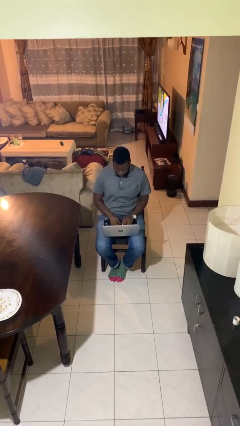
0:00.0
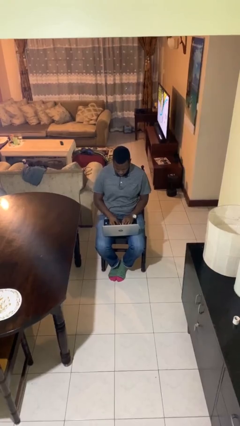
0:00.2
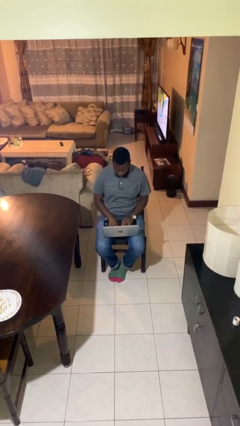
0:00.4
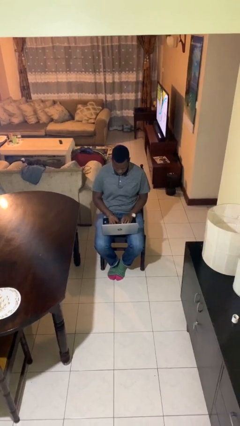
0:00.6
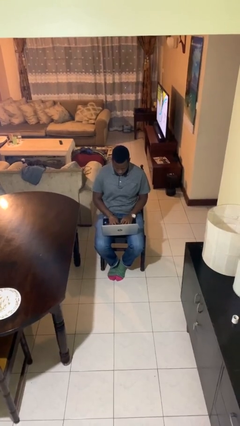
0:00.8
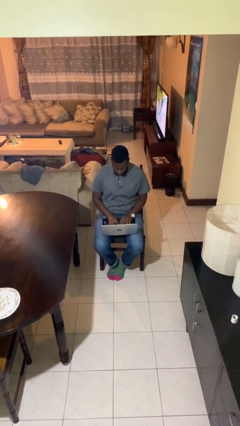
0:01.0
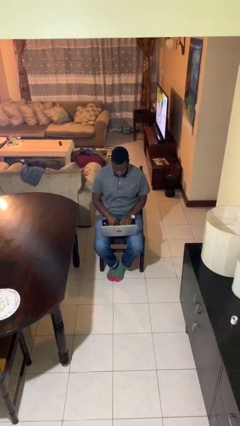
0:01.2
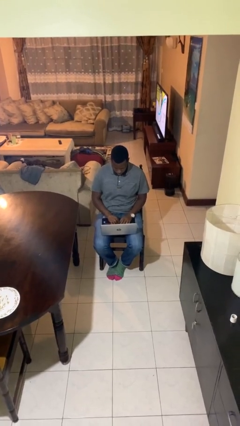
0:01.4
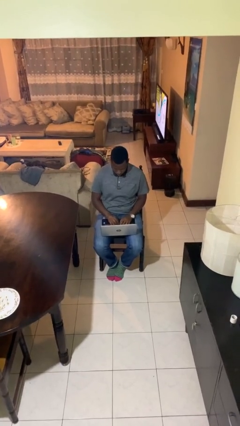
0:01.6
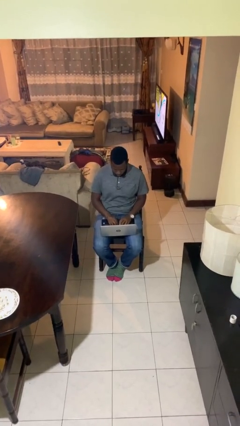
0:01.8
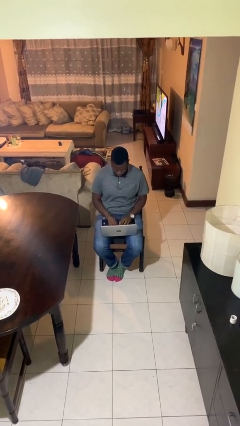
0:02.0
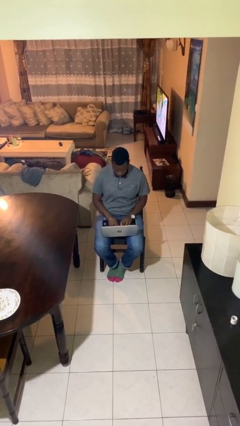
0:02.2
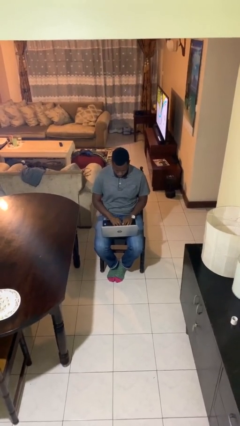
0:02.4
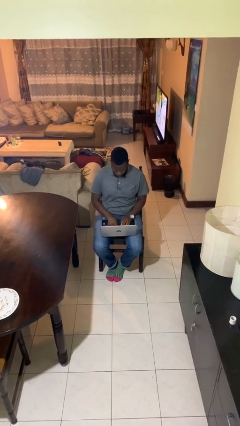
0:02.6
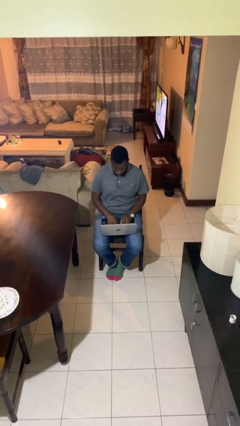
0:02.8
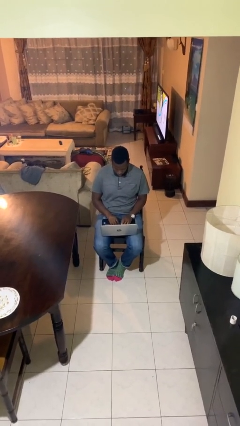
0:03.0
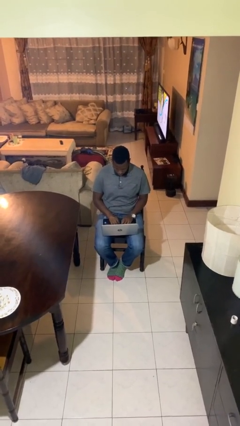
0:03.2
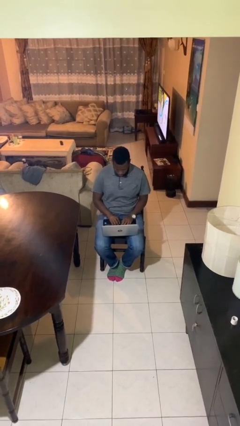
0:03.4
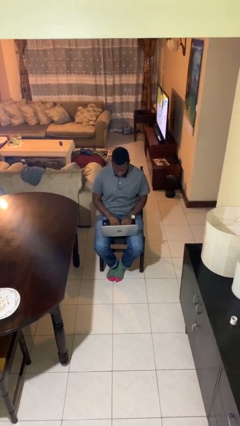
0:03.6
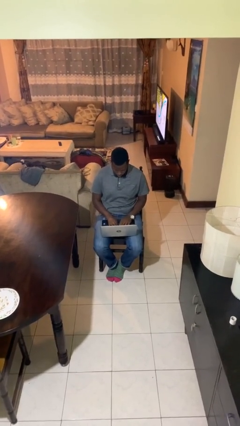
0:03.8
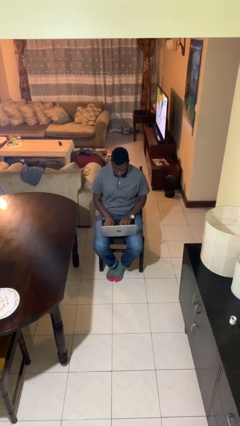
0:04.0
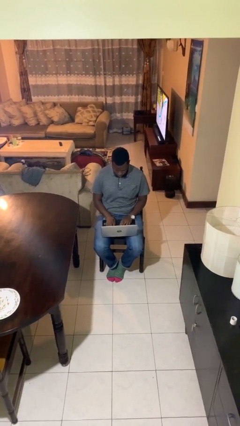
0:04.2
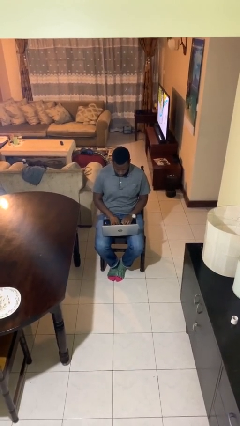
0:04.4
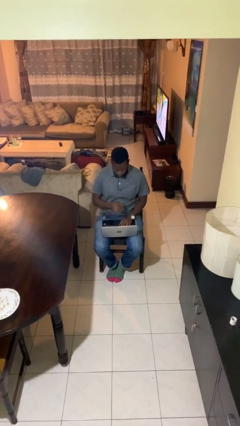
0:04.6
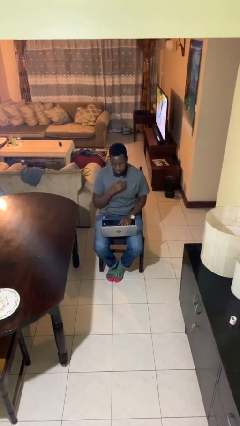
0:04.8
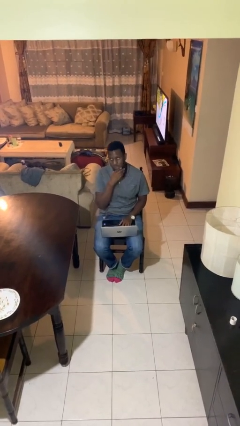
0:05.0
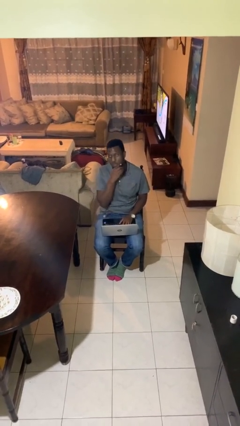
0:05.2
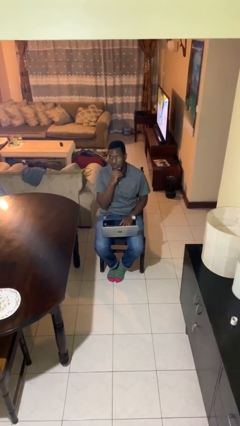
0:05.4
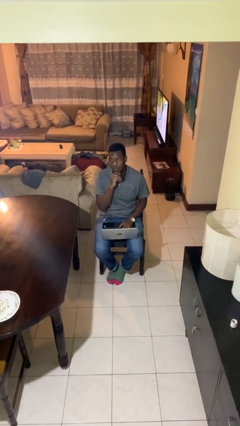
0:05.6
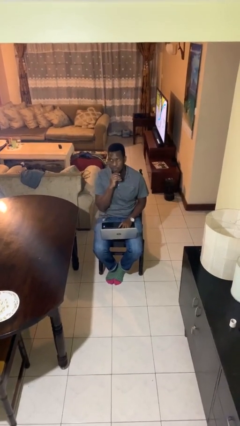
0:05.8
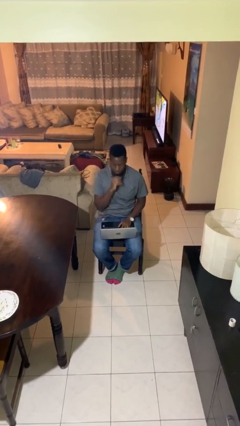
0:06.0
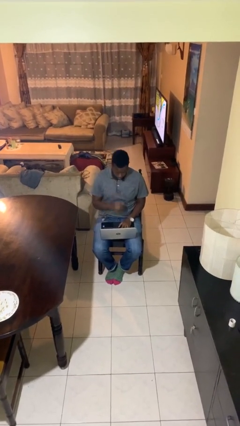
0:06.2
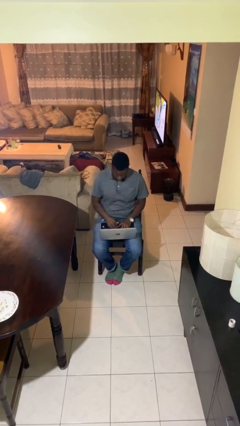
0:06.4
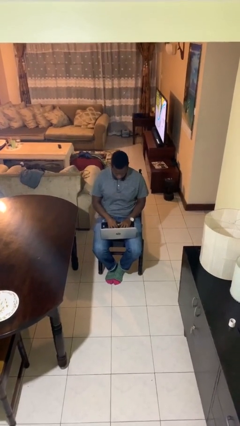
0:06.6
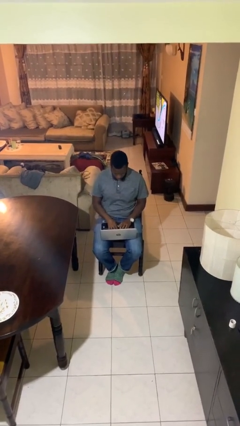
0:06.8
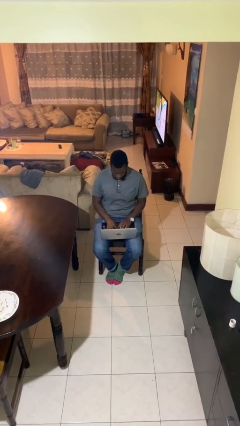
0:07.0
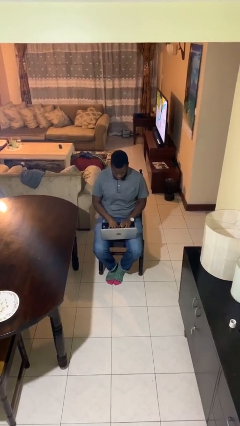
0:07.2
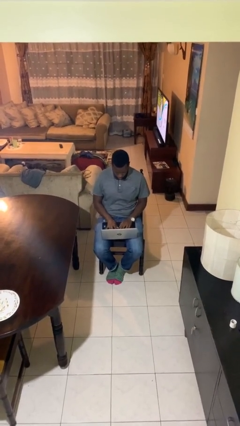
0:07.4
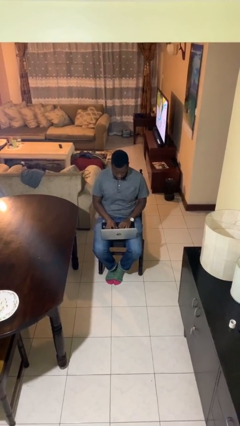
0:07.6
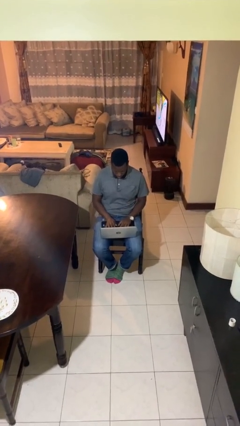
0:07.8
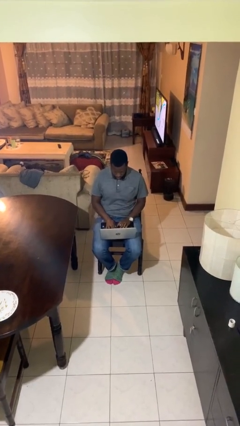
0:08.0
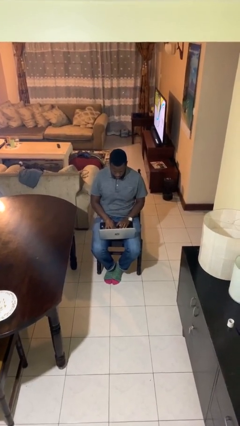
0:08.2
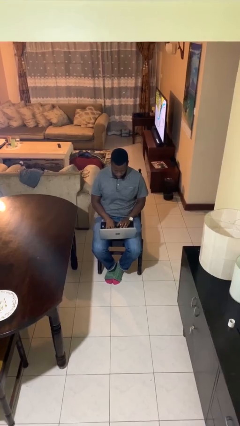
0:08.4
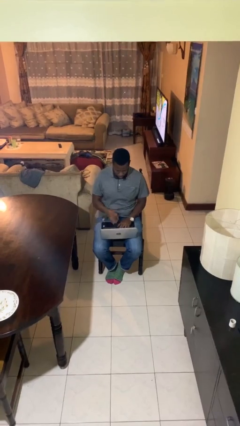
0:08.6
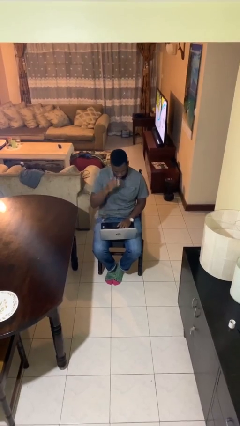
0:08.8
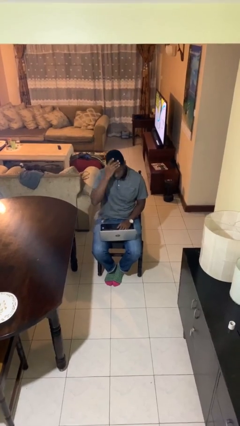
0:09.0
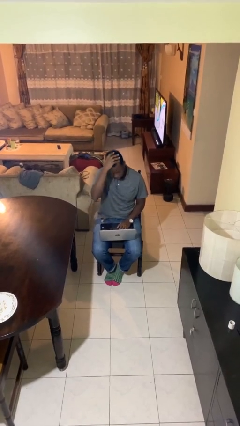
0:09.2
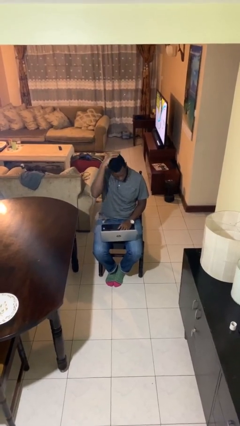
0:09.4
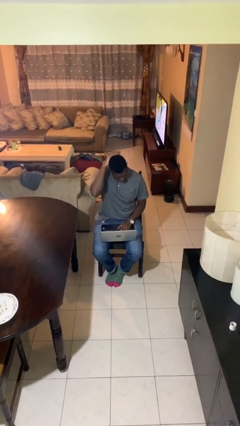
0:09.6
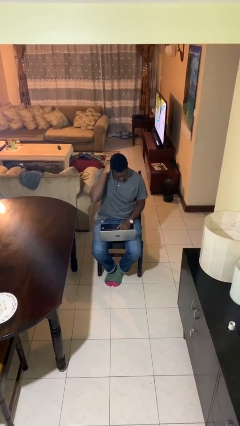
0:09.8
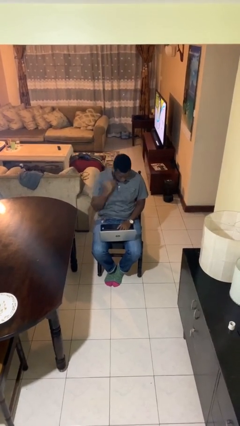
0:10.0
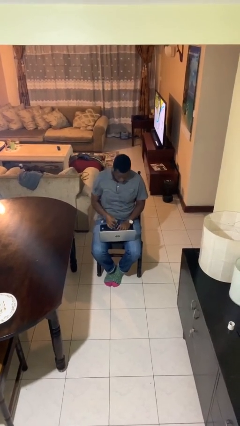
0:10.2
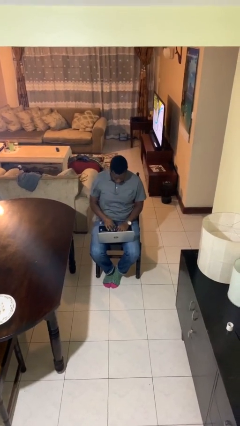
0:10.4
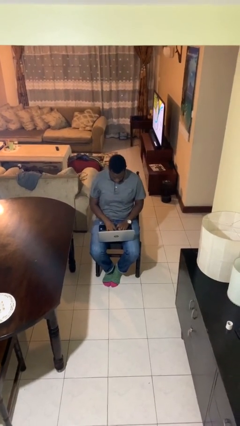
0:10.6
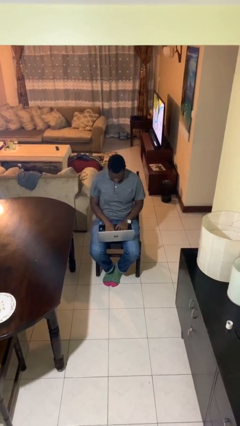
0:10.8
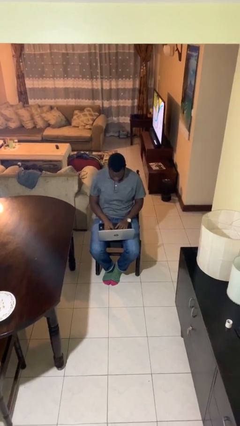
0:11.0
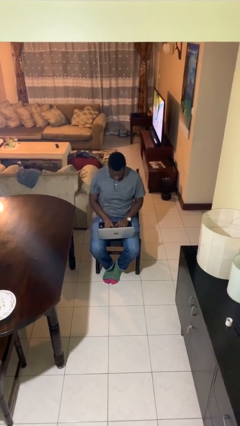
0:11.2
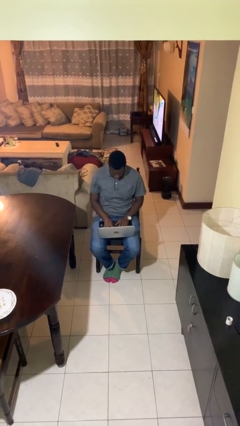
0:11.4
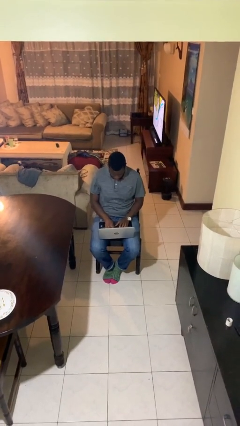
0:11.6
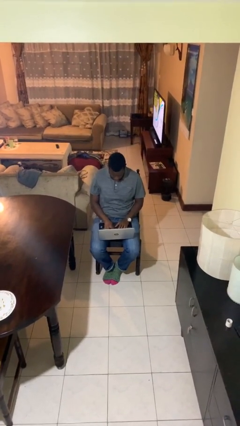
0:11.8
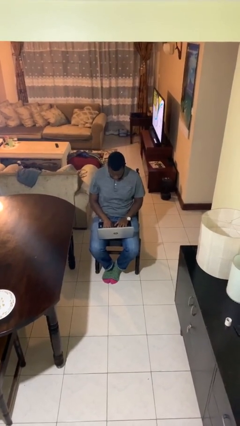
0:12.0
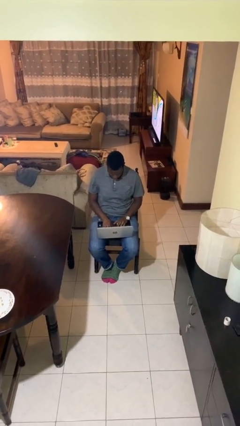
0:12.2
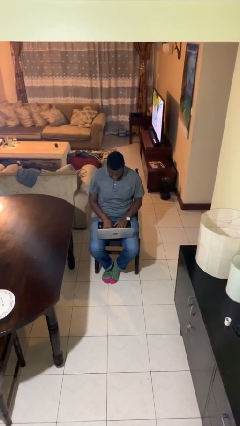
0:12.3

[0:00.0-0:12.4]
person interacts with laptop

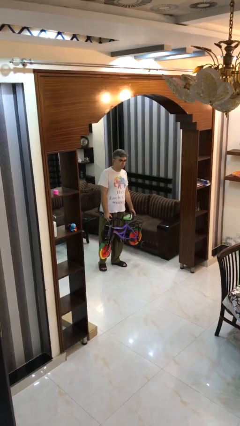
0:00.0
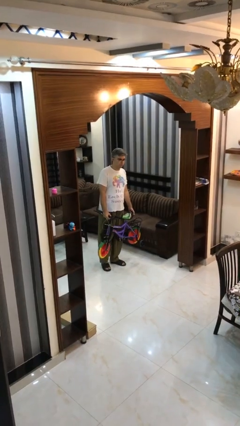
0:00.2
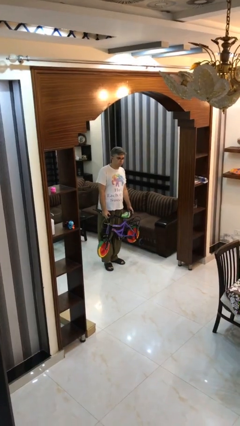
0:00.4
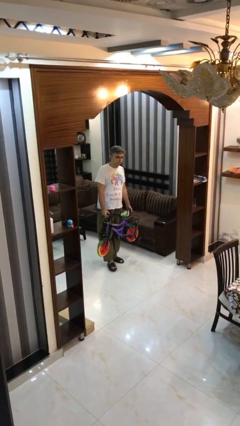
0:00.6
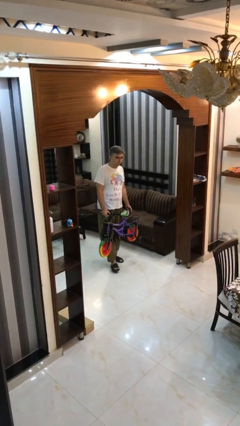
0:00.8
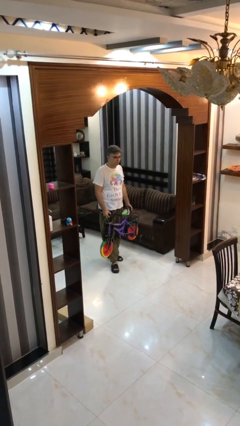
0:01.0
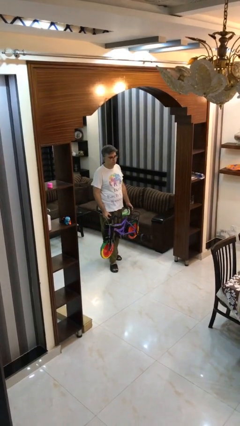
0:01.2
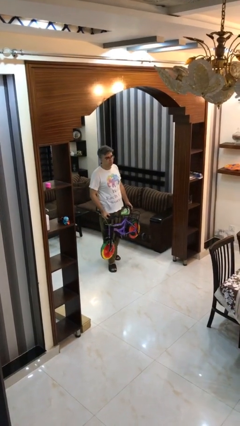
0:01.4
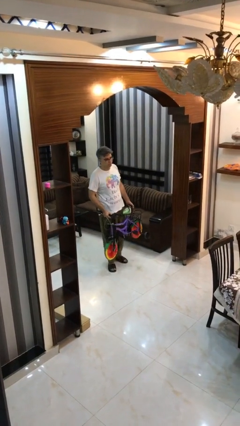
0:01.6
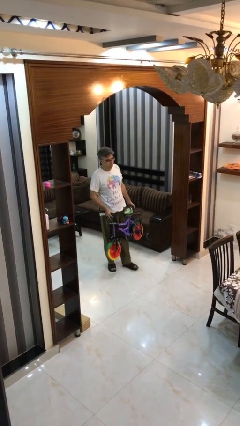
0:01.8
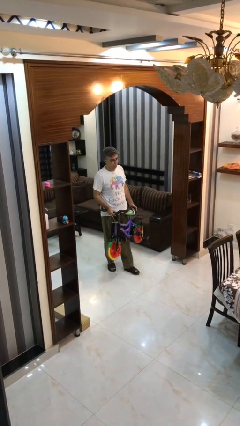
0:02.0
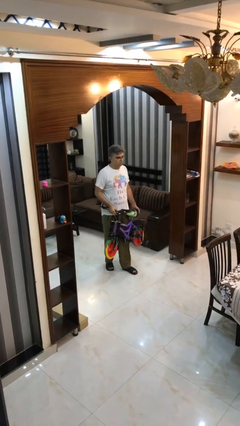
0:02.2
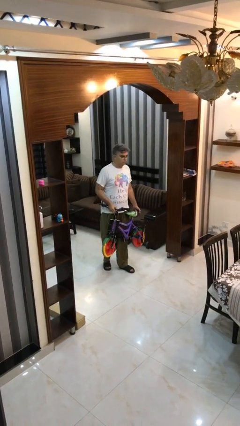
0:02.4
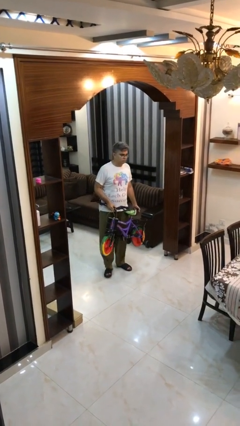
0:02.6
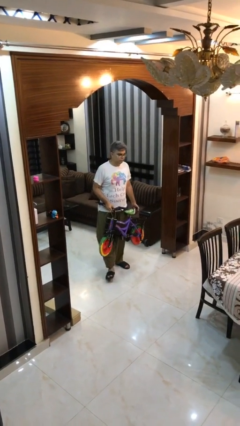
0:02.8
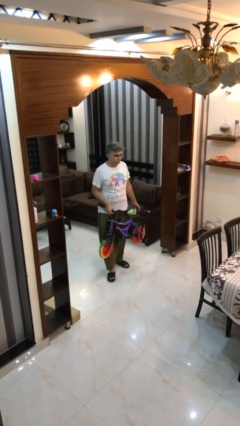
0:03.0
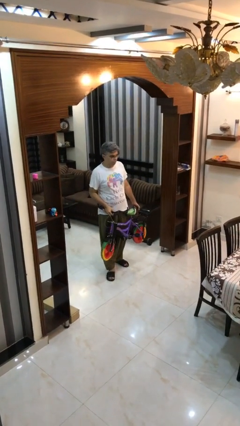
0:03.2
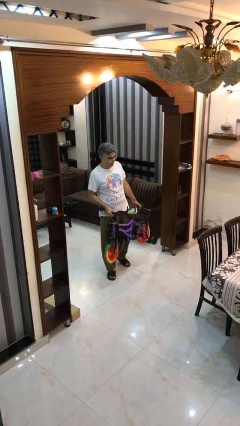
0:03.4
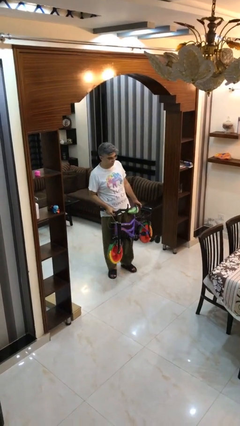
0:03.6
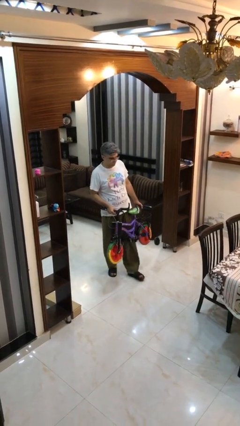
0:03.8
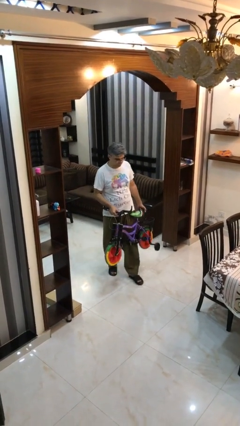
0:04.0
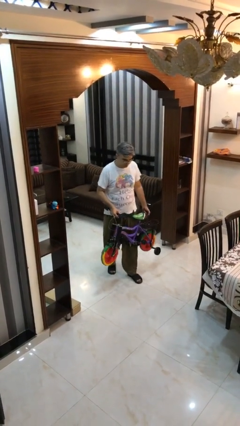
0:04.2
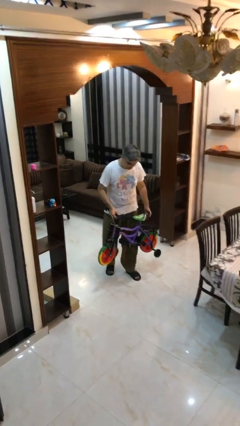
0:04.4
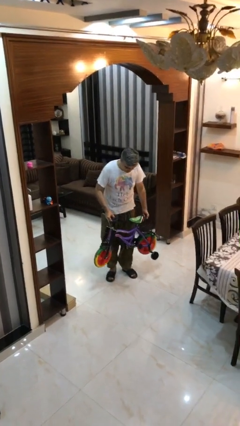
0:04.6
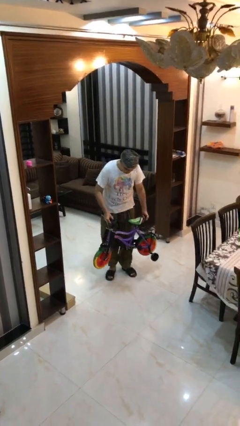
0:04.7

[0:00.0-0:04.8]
person carries heavy object

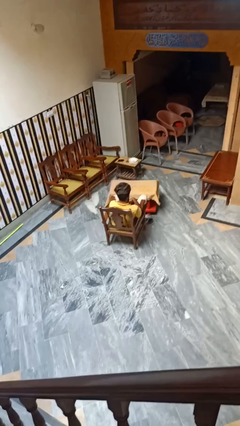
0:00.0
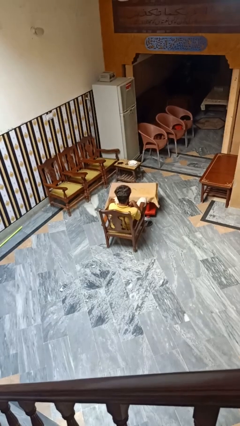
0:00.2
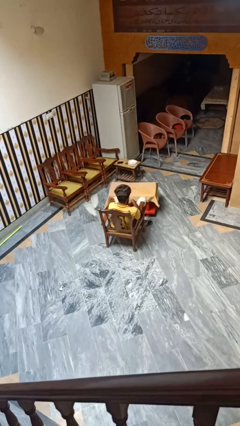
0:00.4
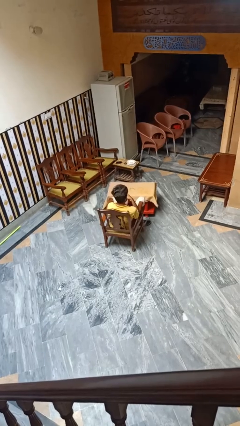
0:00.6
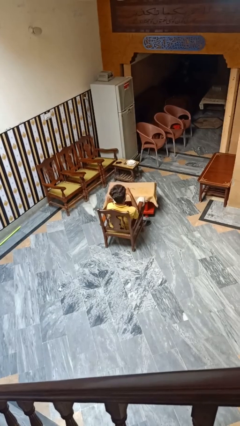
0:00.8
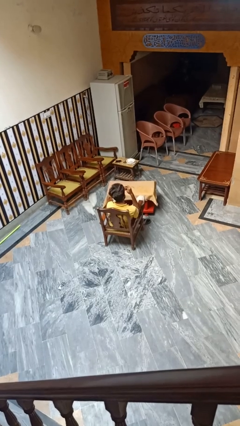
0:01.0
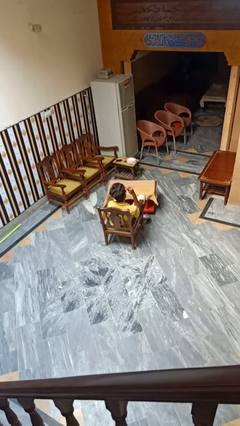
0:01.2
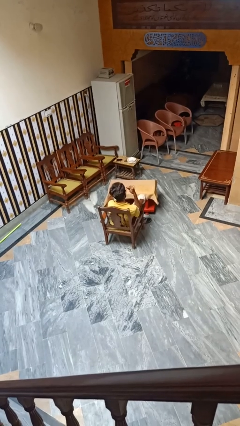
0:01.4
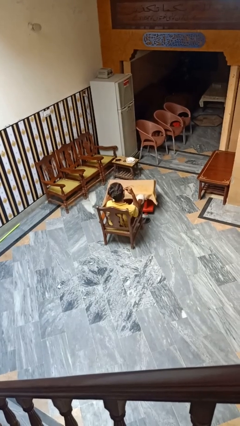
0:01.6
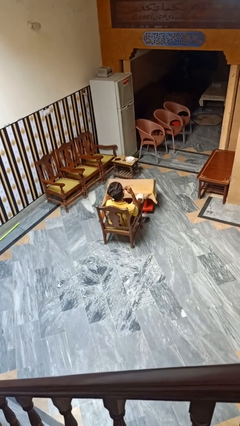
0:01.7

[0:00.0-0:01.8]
person clips fingernails
